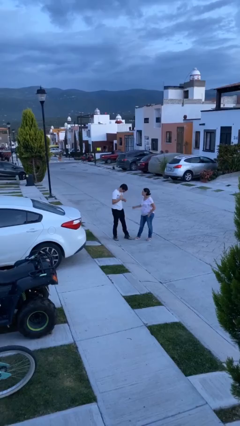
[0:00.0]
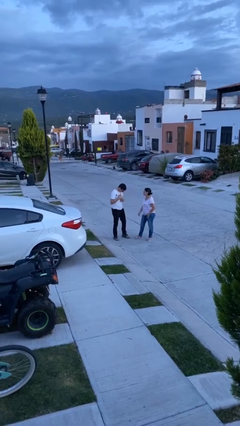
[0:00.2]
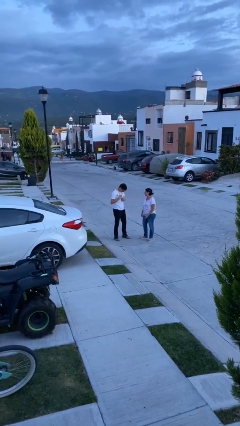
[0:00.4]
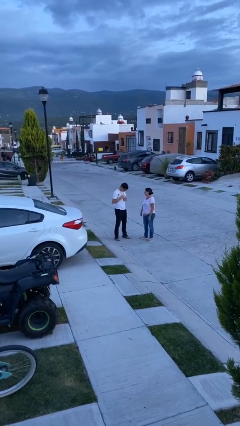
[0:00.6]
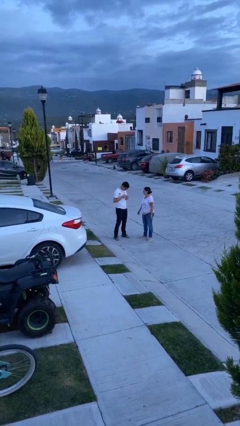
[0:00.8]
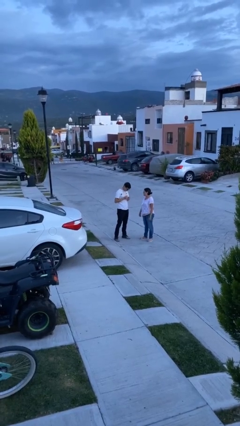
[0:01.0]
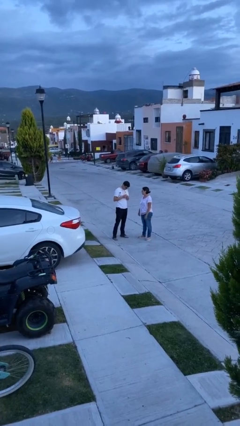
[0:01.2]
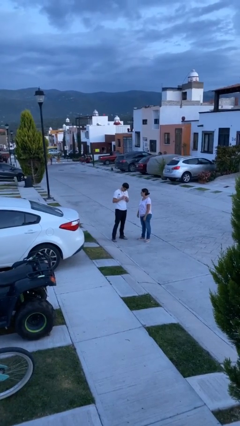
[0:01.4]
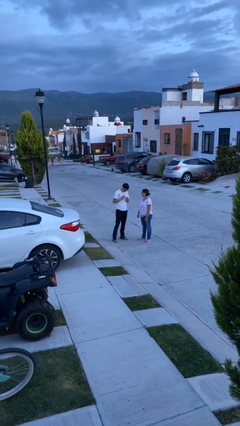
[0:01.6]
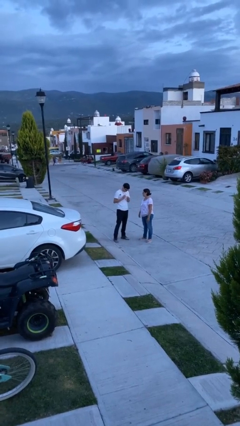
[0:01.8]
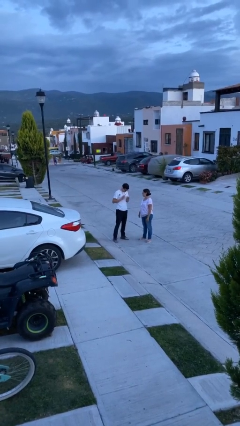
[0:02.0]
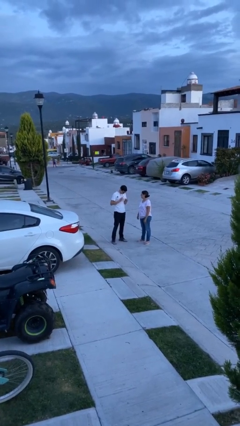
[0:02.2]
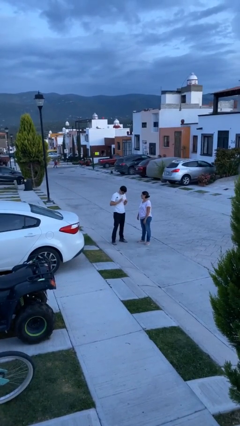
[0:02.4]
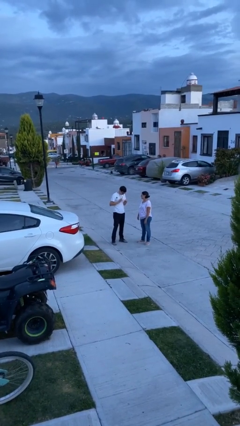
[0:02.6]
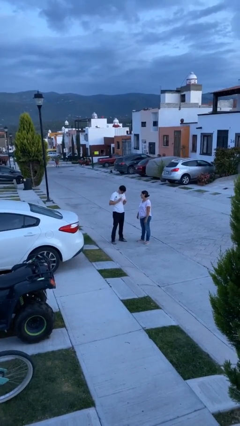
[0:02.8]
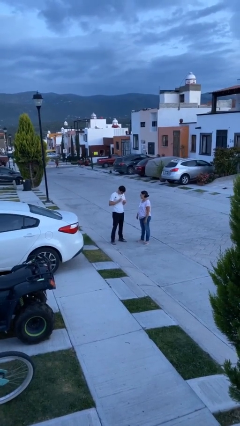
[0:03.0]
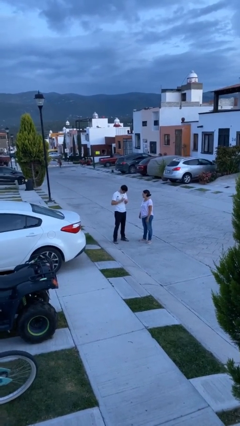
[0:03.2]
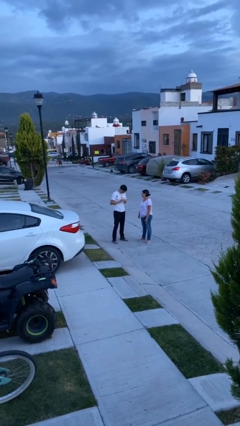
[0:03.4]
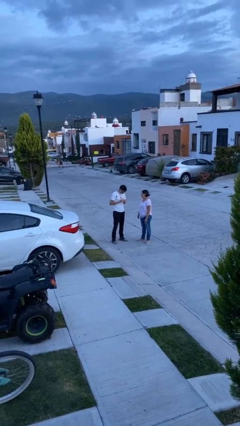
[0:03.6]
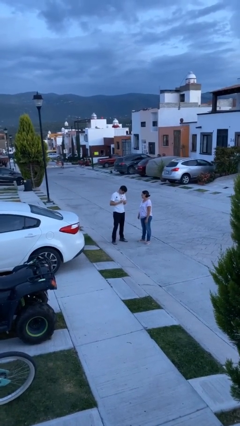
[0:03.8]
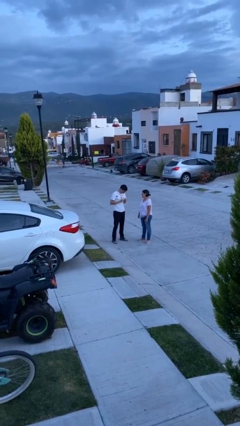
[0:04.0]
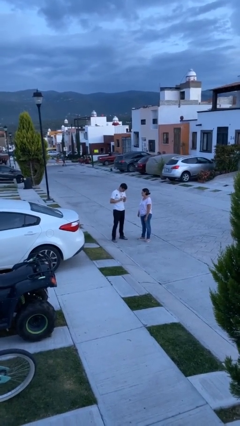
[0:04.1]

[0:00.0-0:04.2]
person talks to person

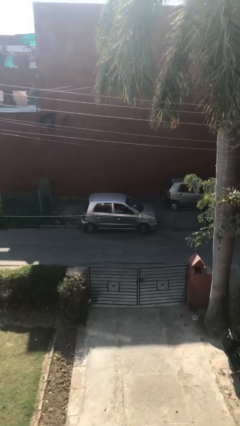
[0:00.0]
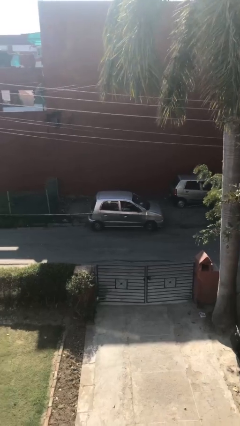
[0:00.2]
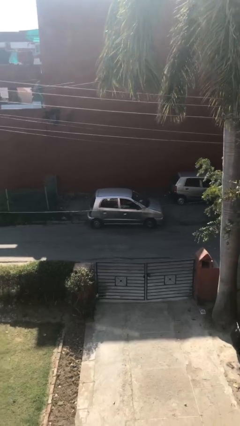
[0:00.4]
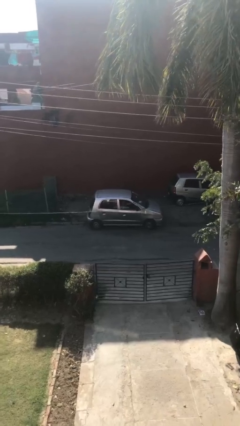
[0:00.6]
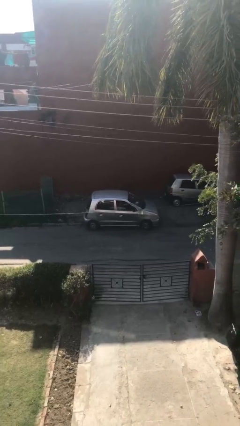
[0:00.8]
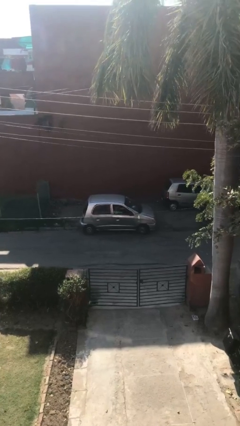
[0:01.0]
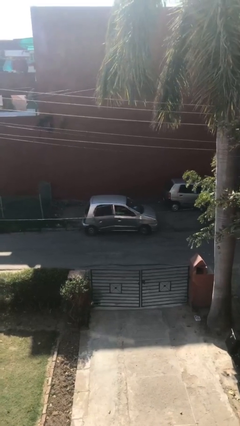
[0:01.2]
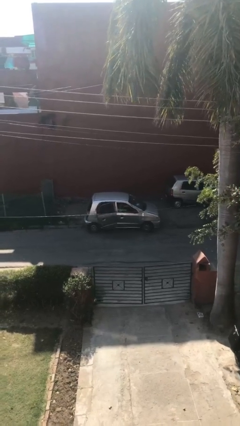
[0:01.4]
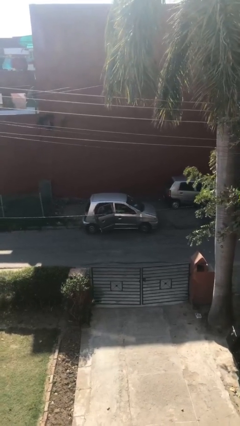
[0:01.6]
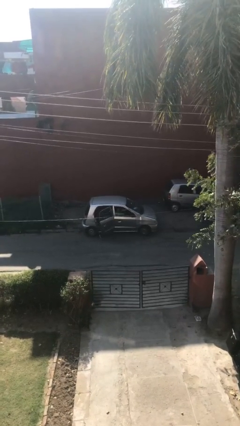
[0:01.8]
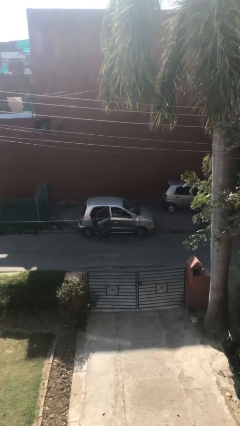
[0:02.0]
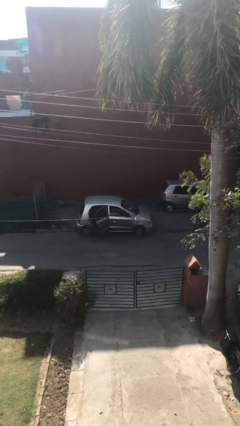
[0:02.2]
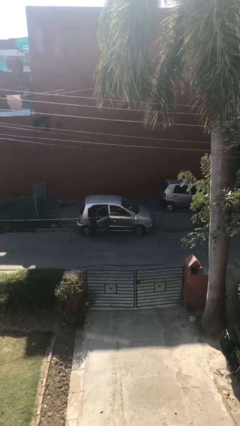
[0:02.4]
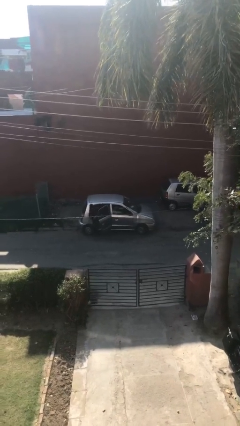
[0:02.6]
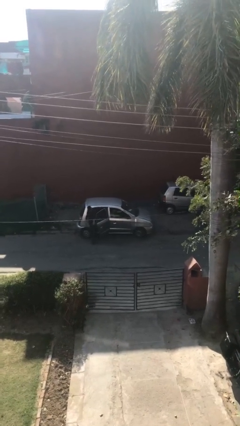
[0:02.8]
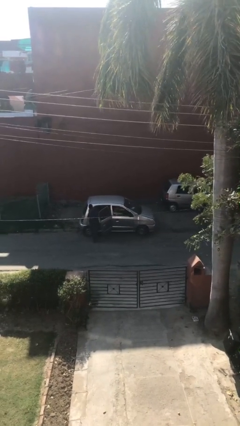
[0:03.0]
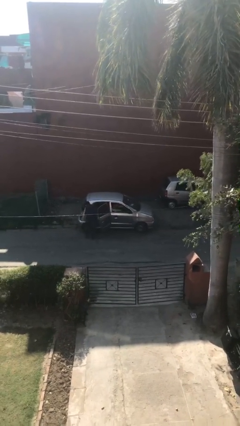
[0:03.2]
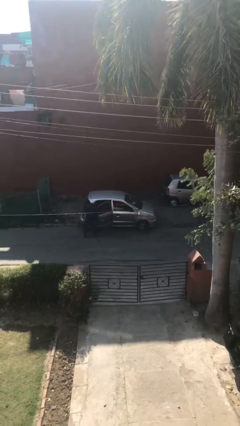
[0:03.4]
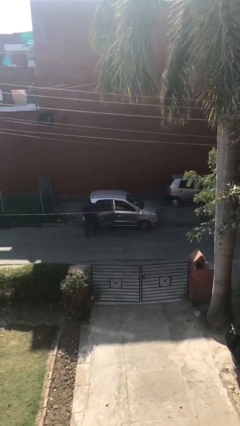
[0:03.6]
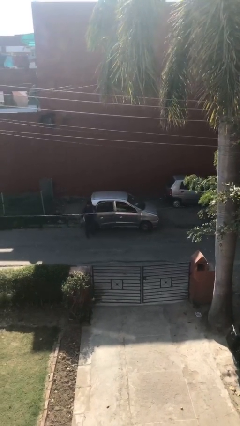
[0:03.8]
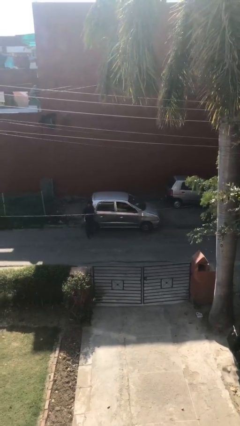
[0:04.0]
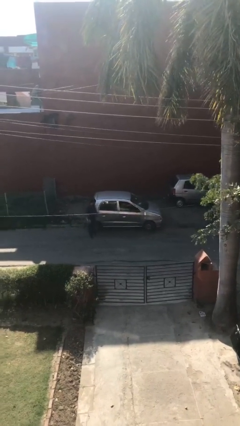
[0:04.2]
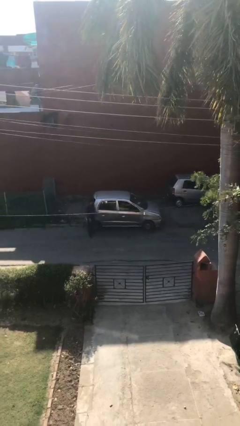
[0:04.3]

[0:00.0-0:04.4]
car drops off person

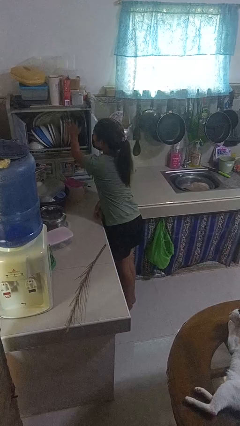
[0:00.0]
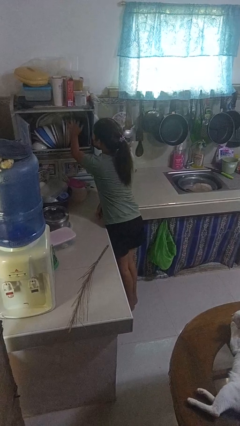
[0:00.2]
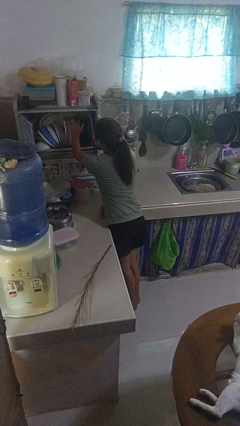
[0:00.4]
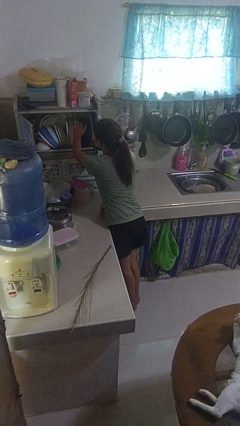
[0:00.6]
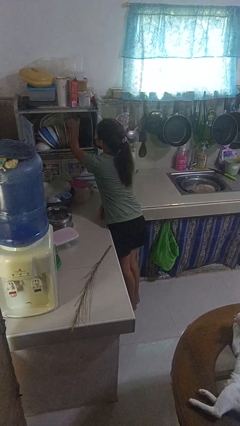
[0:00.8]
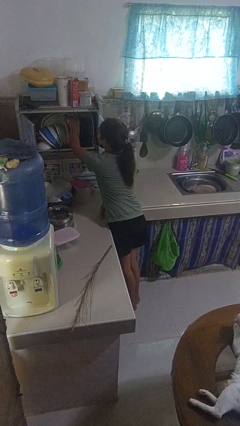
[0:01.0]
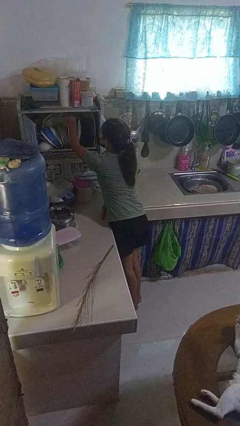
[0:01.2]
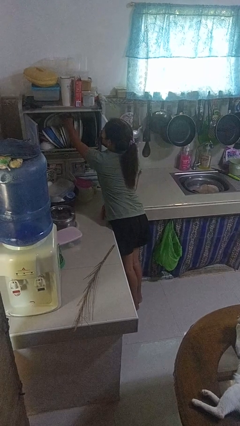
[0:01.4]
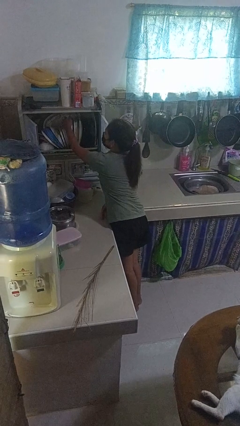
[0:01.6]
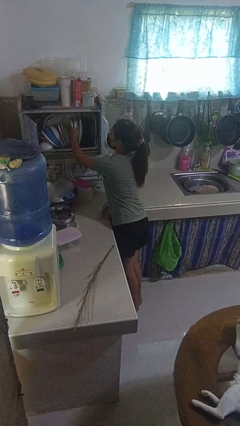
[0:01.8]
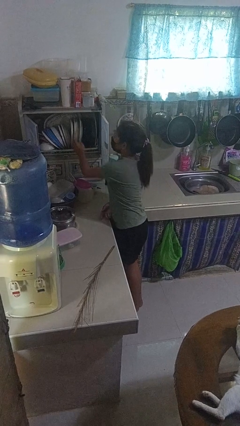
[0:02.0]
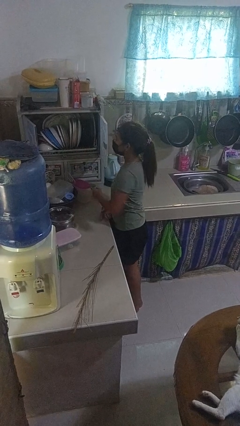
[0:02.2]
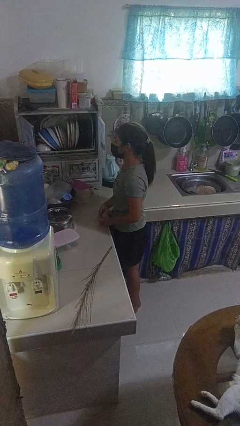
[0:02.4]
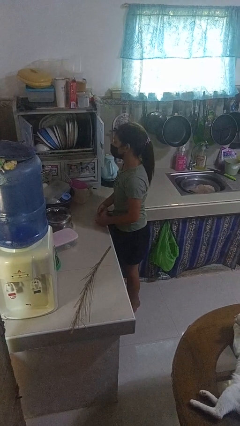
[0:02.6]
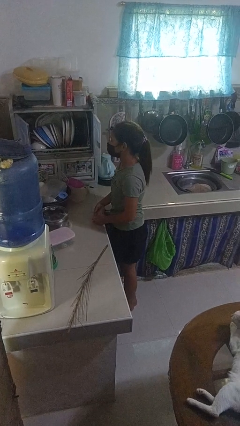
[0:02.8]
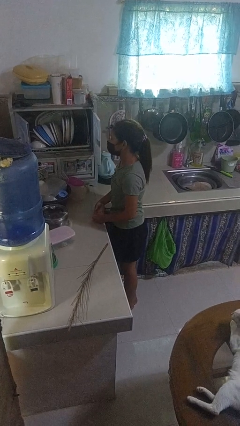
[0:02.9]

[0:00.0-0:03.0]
person searches in kitchen drawer

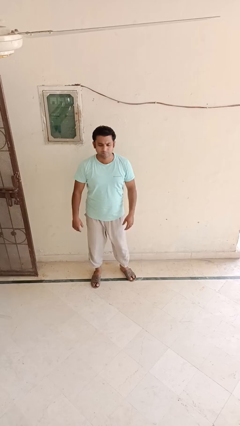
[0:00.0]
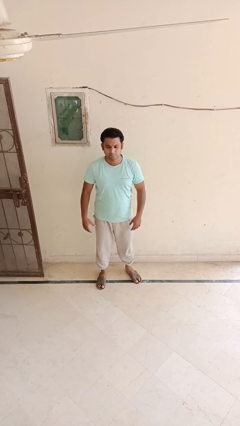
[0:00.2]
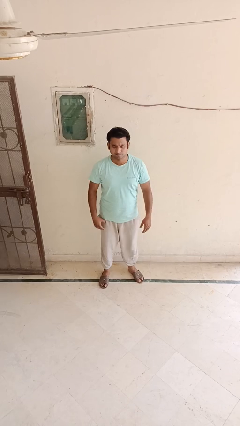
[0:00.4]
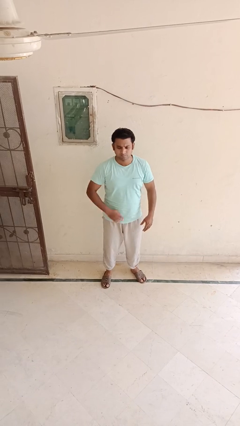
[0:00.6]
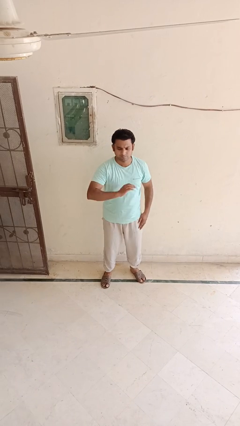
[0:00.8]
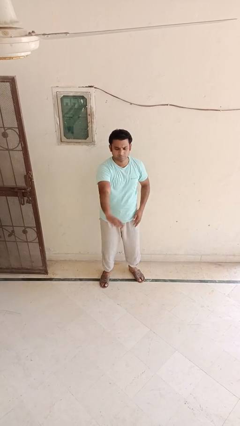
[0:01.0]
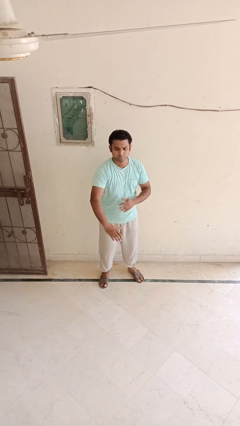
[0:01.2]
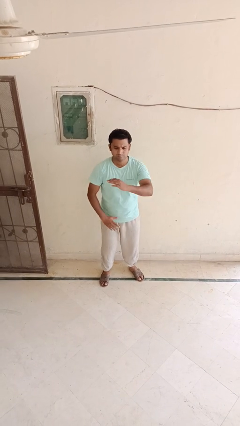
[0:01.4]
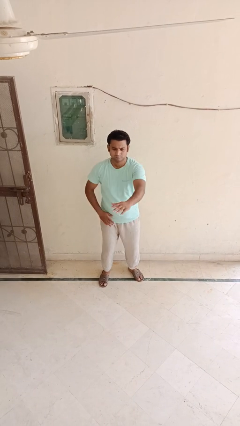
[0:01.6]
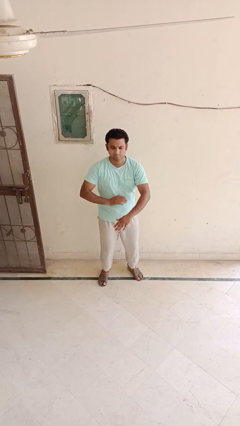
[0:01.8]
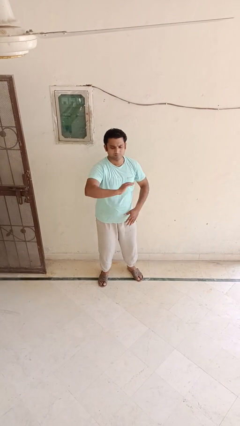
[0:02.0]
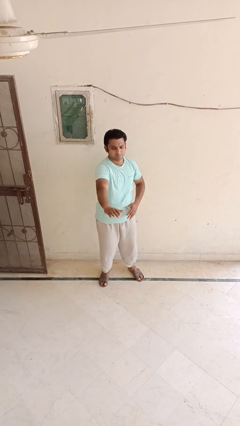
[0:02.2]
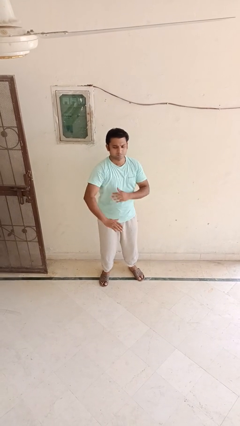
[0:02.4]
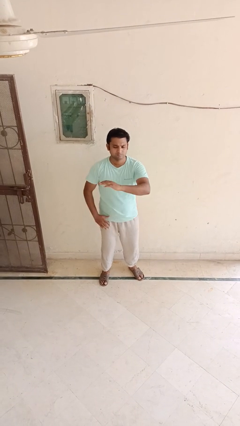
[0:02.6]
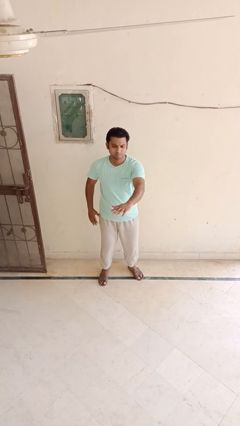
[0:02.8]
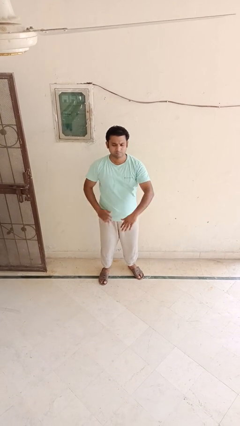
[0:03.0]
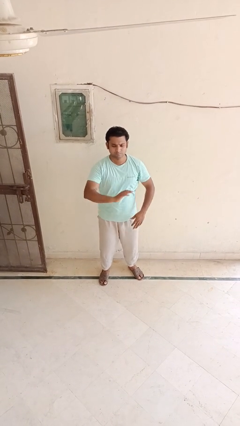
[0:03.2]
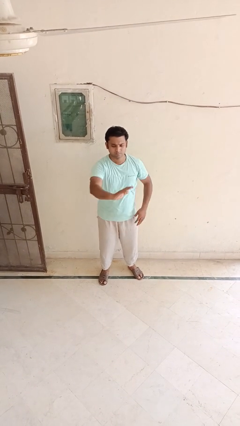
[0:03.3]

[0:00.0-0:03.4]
person karate chop

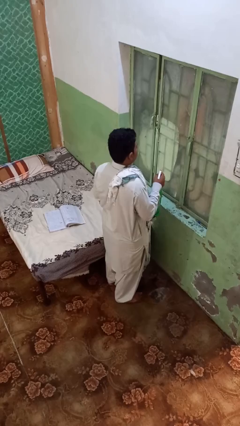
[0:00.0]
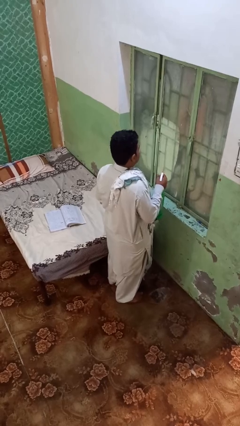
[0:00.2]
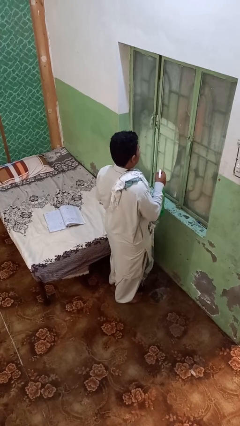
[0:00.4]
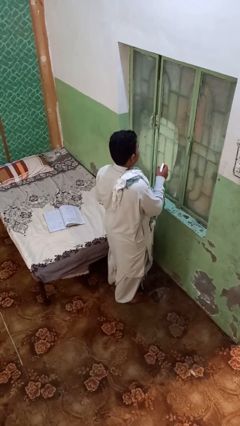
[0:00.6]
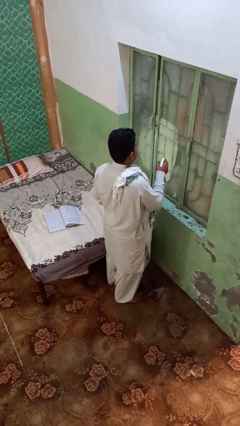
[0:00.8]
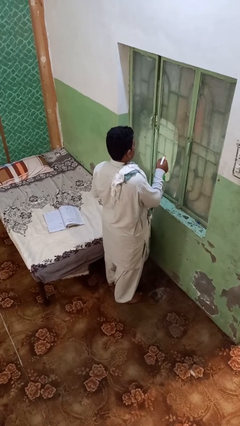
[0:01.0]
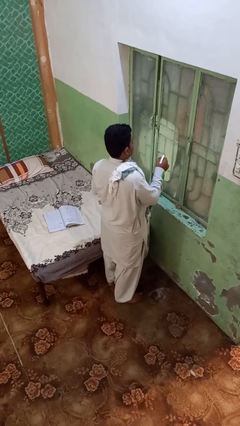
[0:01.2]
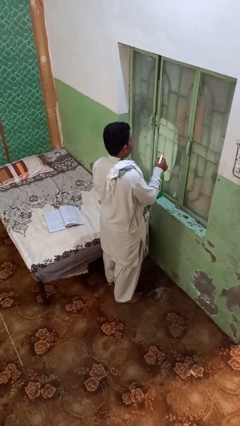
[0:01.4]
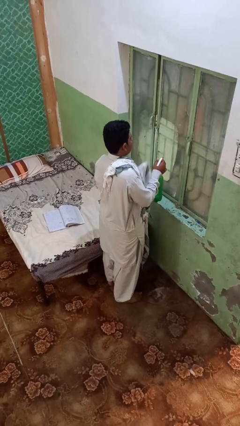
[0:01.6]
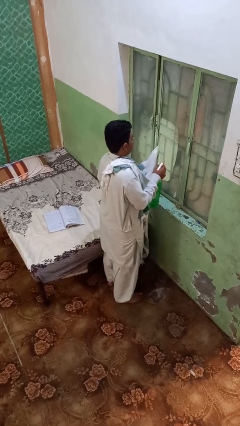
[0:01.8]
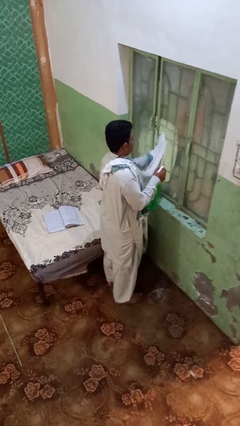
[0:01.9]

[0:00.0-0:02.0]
person sprays from bottle

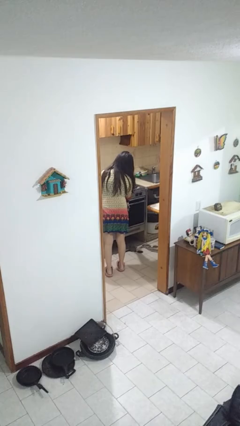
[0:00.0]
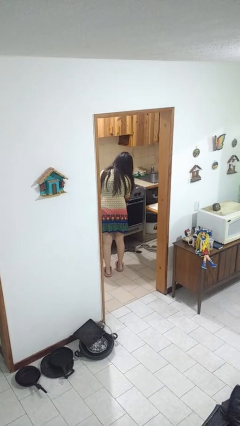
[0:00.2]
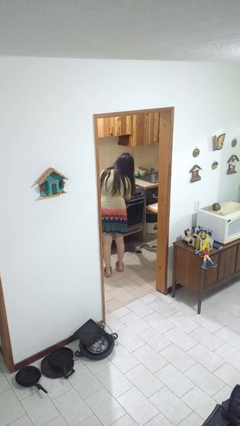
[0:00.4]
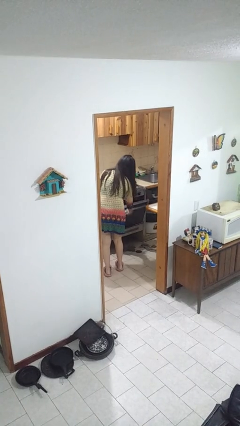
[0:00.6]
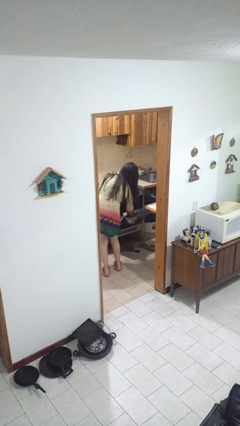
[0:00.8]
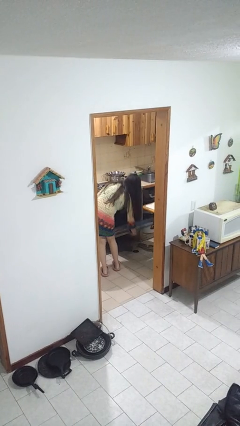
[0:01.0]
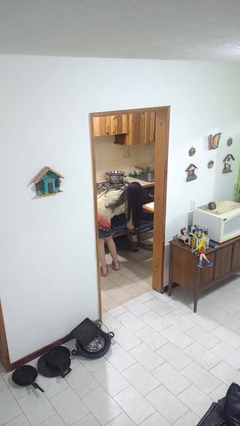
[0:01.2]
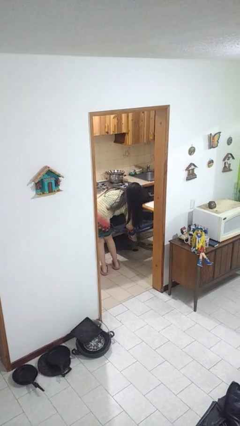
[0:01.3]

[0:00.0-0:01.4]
person opens oven door
